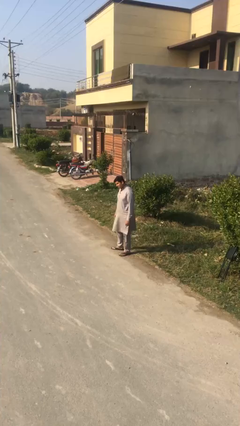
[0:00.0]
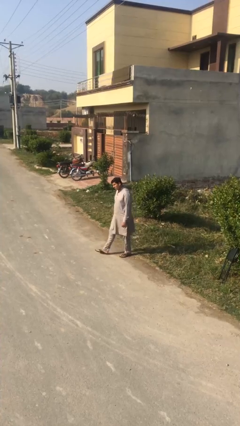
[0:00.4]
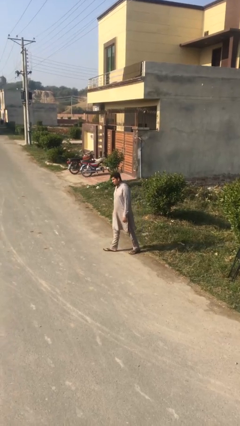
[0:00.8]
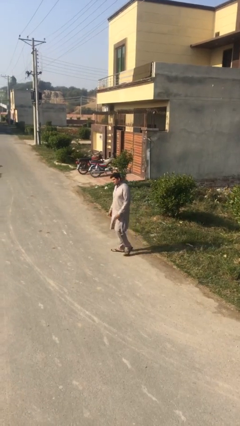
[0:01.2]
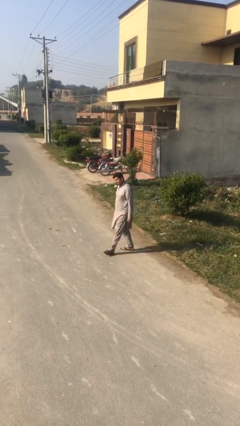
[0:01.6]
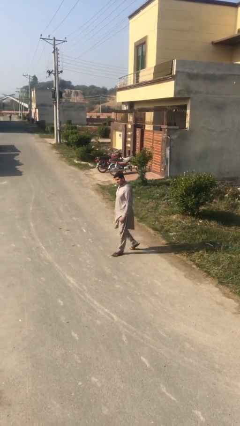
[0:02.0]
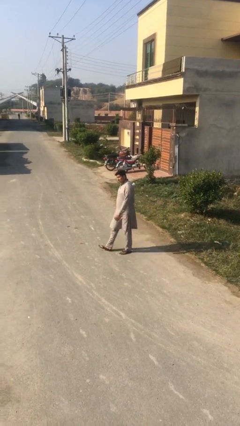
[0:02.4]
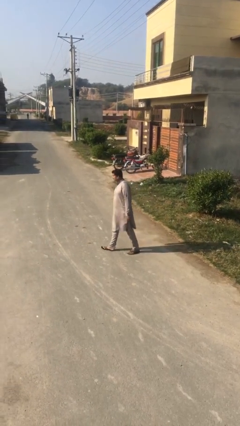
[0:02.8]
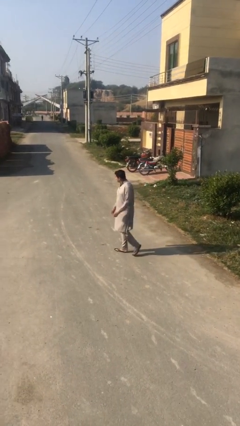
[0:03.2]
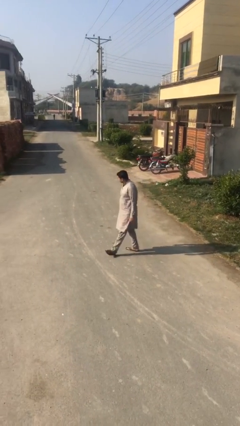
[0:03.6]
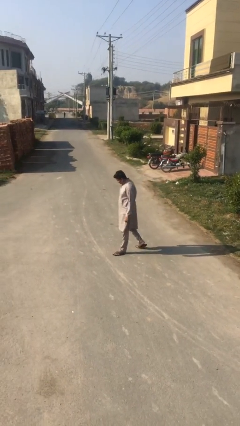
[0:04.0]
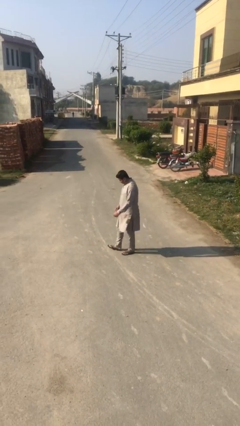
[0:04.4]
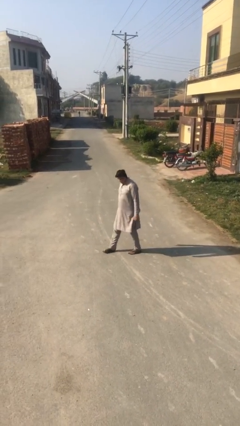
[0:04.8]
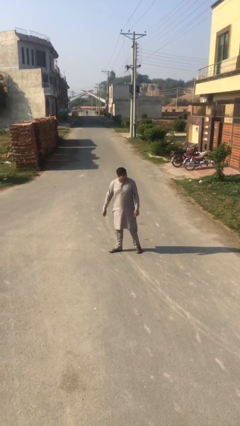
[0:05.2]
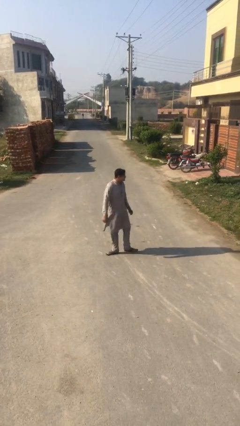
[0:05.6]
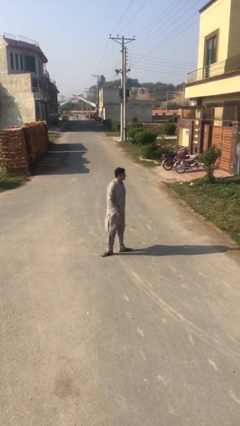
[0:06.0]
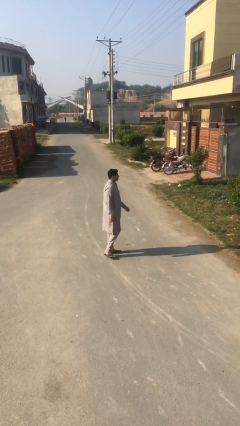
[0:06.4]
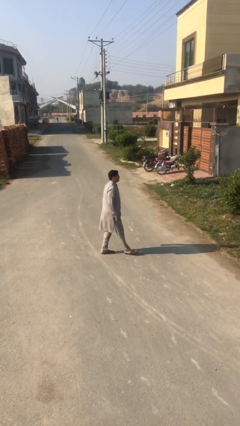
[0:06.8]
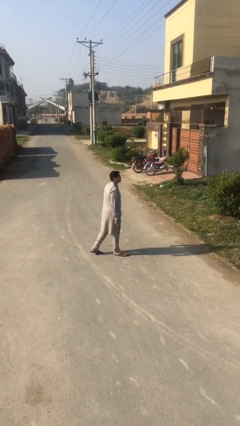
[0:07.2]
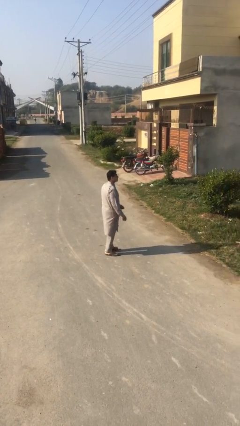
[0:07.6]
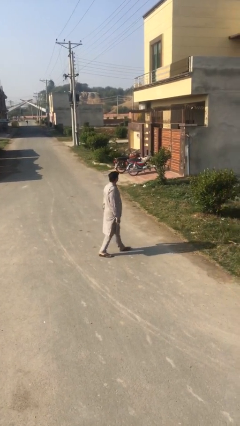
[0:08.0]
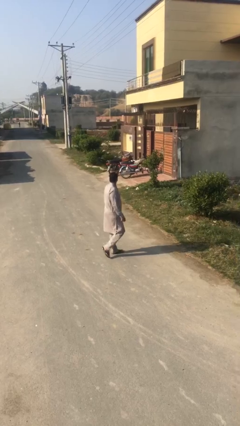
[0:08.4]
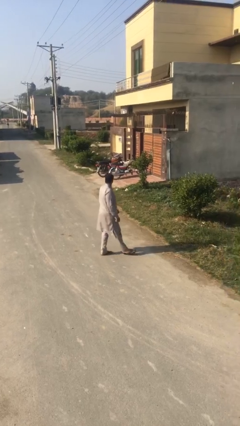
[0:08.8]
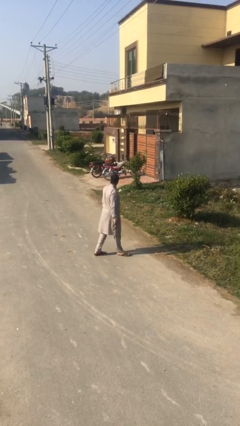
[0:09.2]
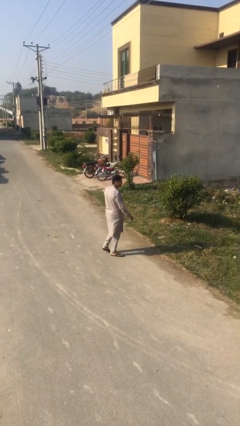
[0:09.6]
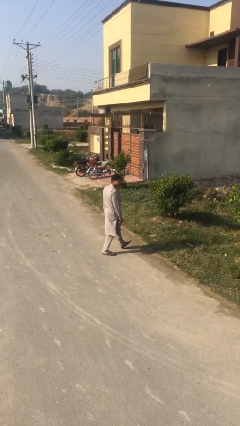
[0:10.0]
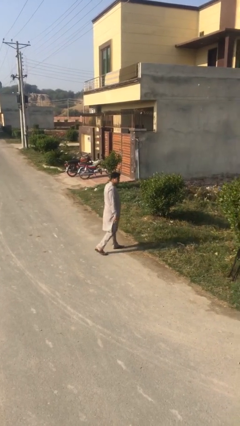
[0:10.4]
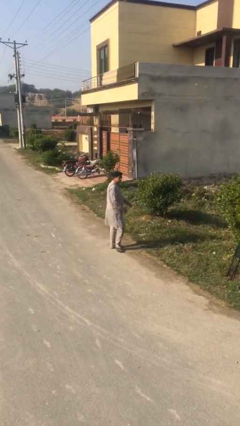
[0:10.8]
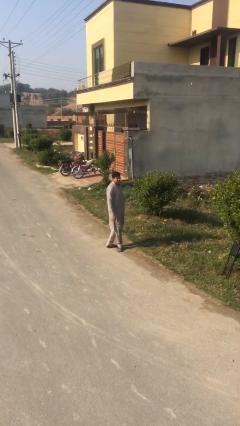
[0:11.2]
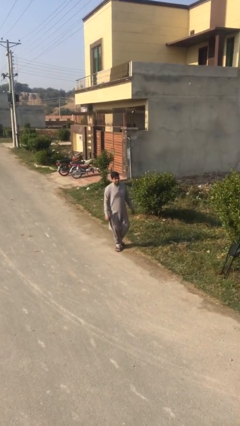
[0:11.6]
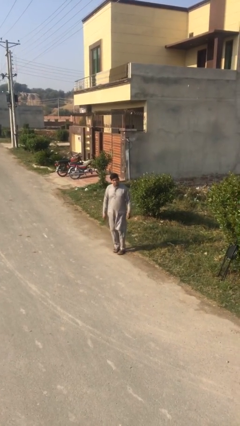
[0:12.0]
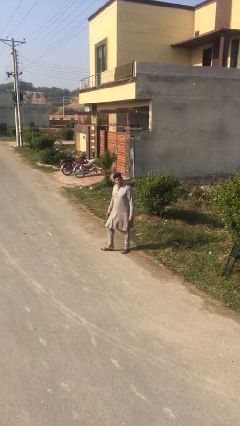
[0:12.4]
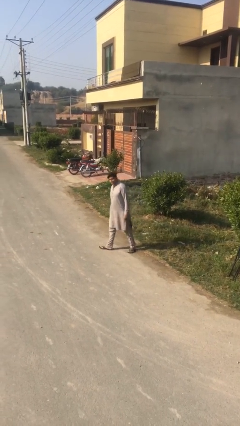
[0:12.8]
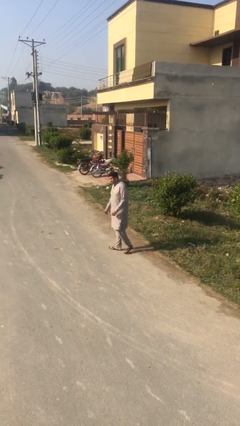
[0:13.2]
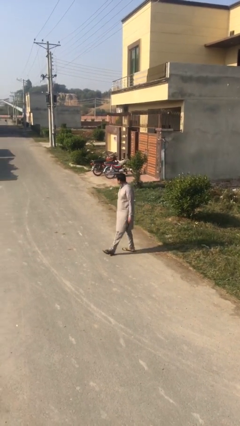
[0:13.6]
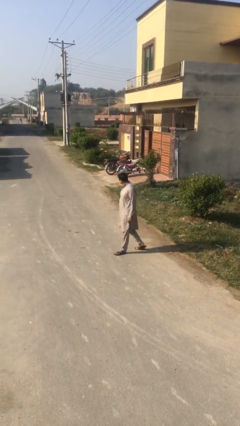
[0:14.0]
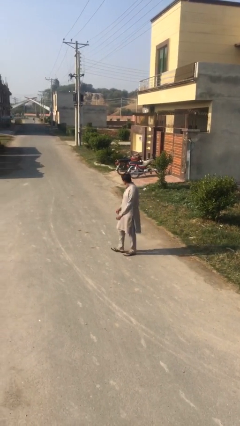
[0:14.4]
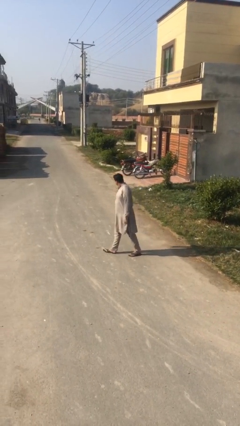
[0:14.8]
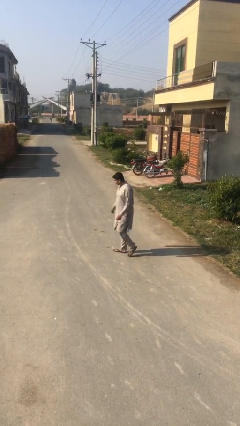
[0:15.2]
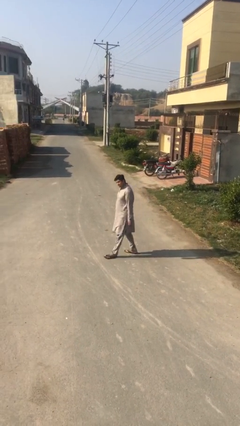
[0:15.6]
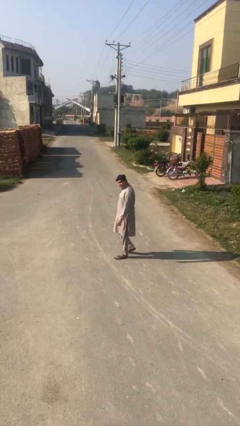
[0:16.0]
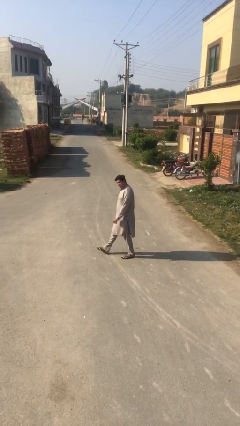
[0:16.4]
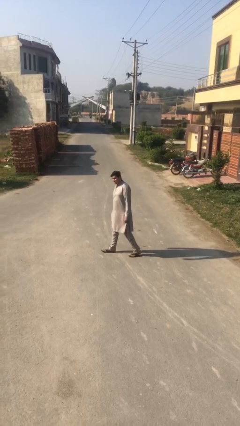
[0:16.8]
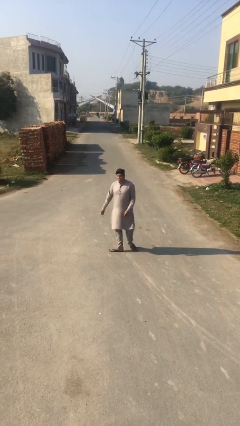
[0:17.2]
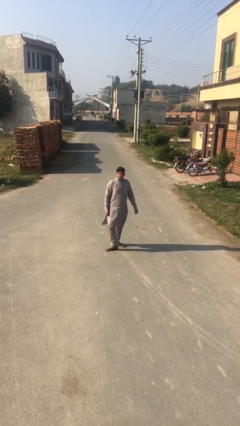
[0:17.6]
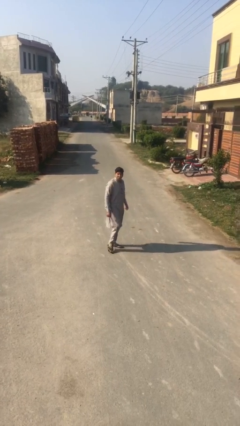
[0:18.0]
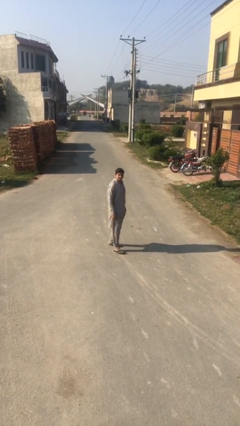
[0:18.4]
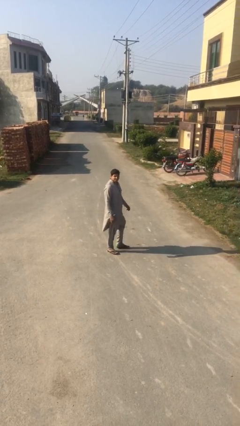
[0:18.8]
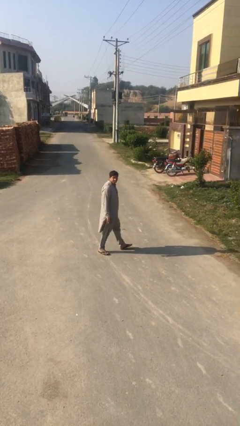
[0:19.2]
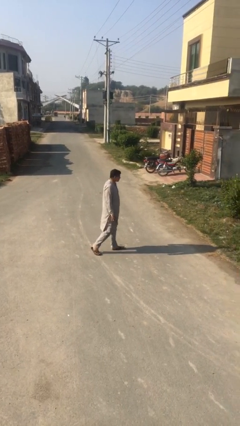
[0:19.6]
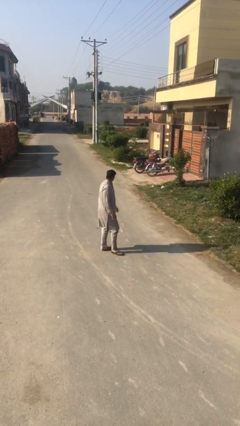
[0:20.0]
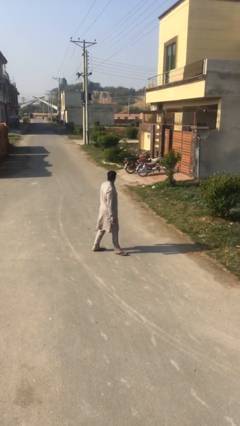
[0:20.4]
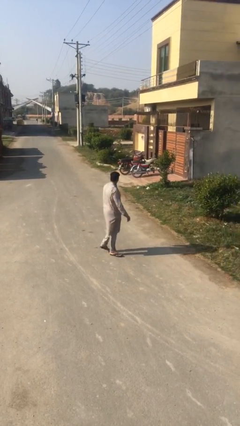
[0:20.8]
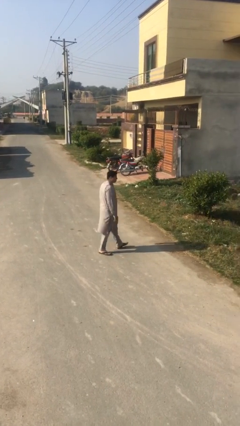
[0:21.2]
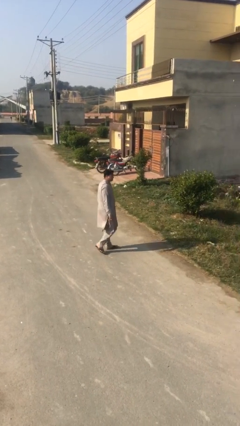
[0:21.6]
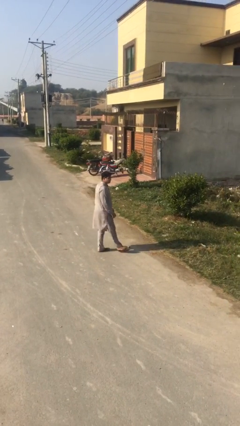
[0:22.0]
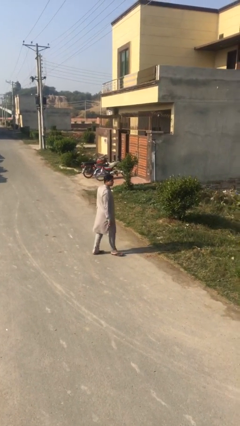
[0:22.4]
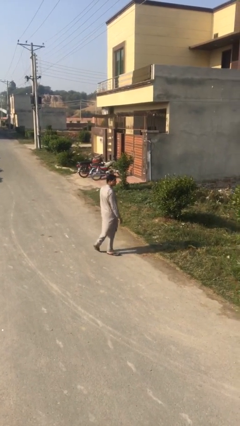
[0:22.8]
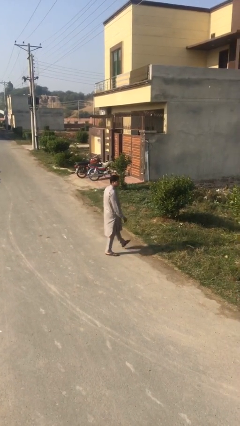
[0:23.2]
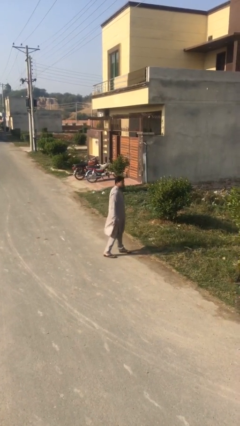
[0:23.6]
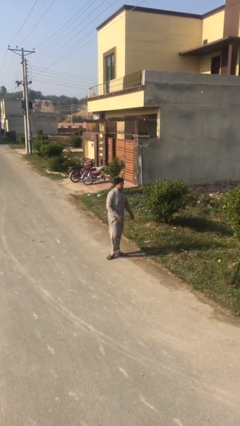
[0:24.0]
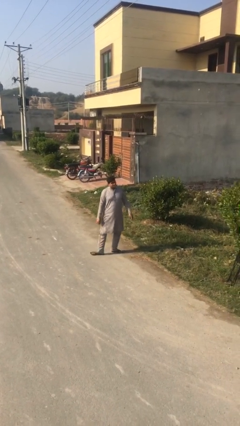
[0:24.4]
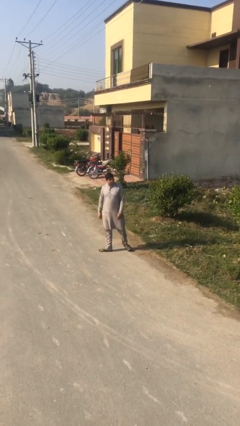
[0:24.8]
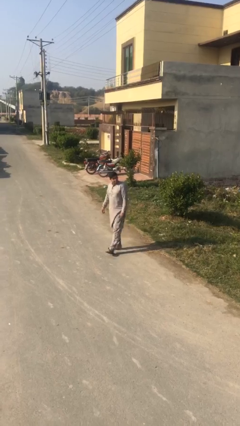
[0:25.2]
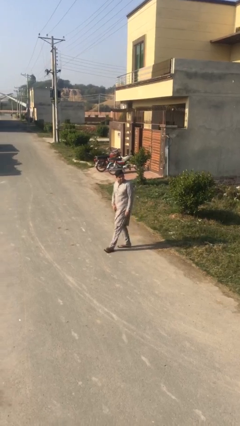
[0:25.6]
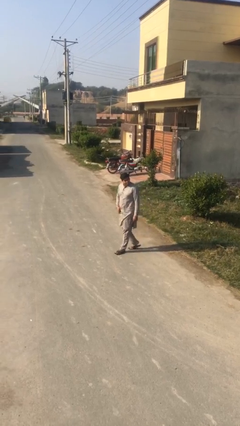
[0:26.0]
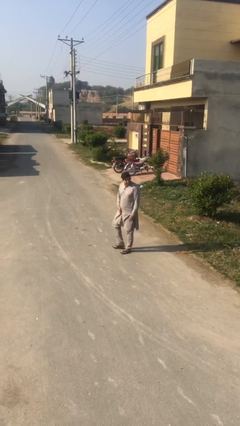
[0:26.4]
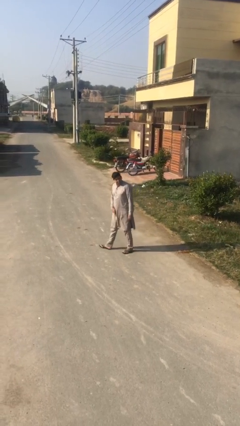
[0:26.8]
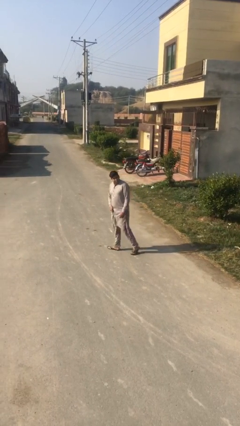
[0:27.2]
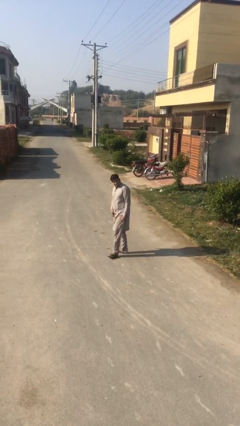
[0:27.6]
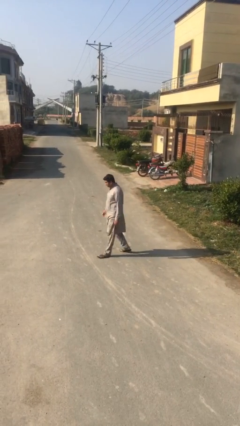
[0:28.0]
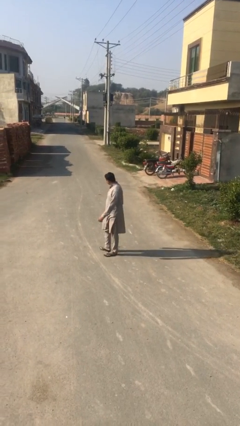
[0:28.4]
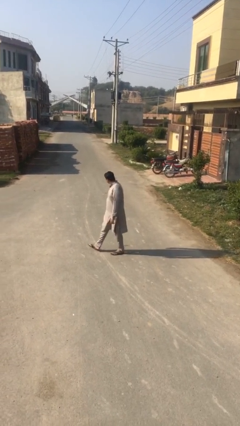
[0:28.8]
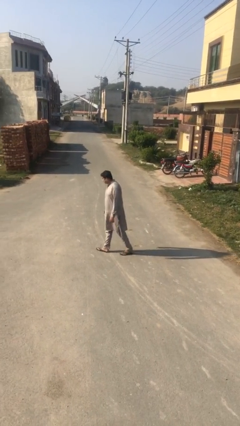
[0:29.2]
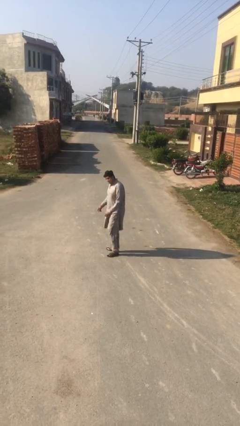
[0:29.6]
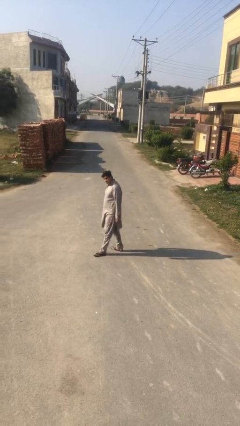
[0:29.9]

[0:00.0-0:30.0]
person walks

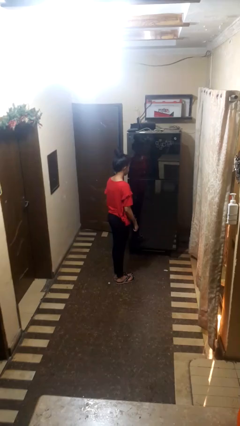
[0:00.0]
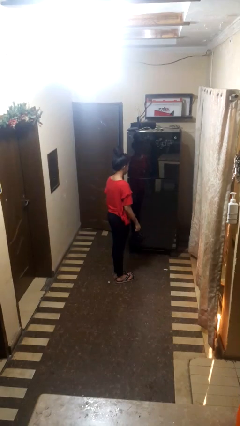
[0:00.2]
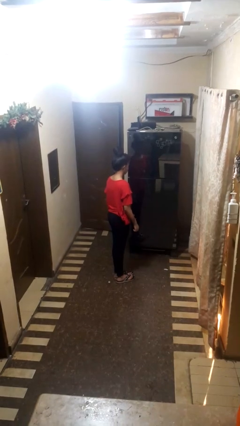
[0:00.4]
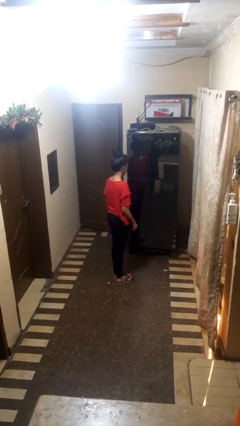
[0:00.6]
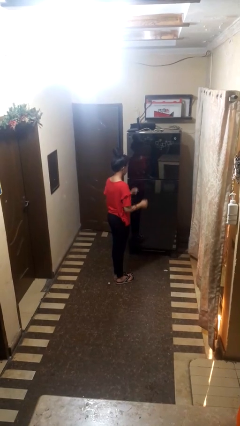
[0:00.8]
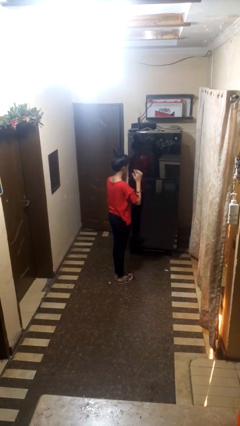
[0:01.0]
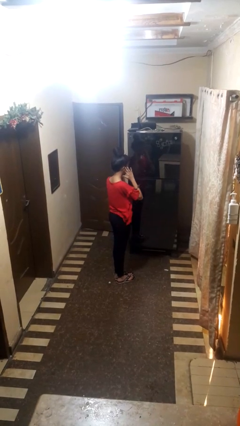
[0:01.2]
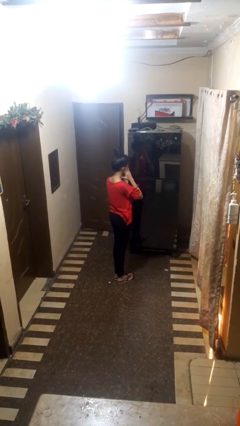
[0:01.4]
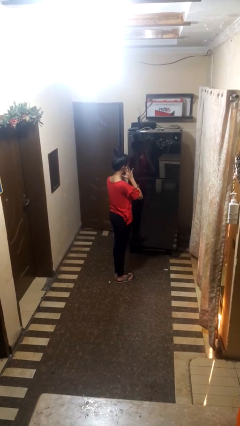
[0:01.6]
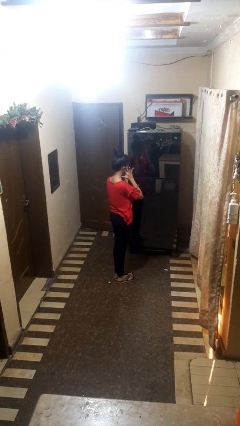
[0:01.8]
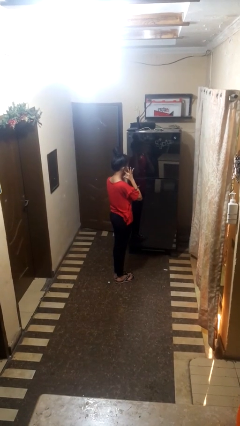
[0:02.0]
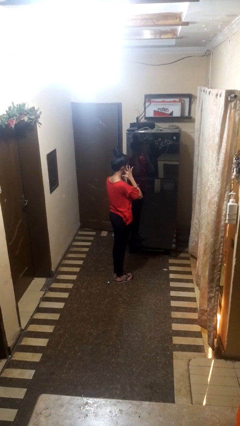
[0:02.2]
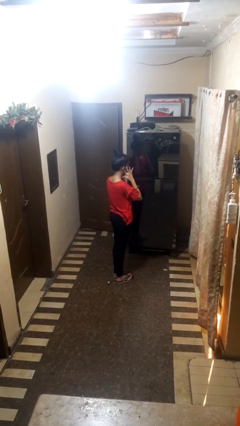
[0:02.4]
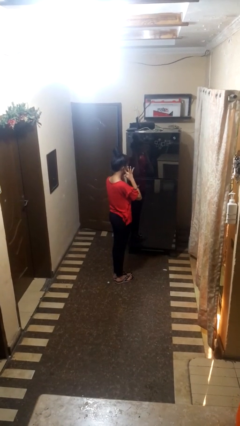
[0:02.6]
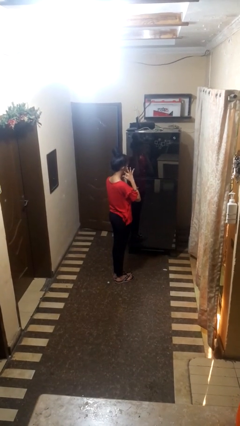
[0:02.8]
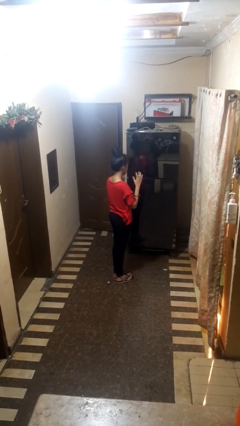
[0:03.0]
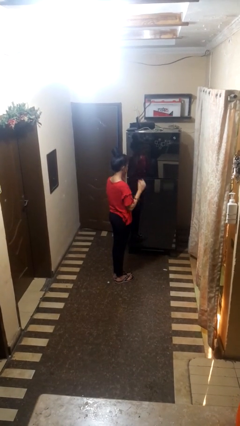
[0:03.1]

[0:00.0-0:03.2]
person touches earlobe
